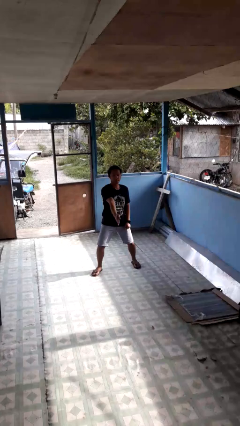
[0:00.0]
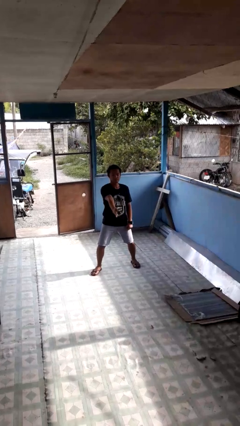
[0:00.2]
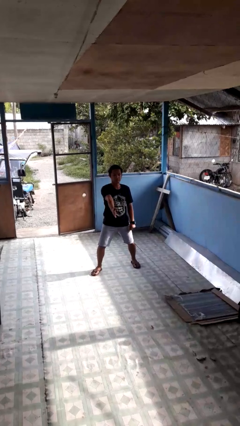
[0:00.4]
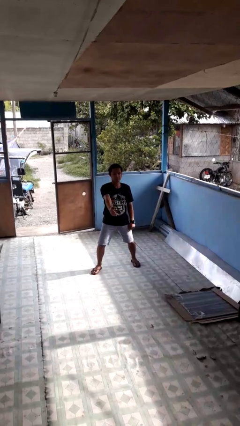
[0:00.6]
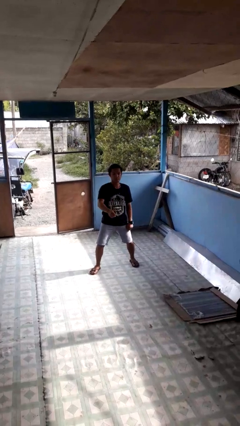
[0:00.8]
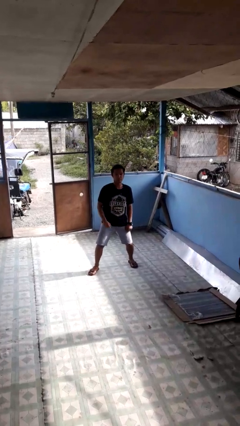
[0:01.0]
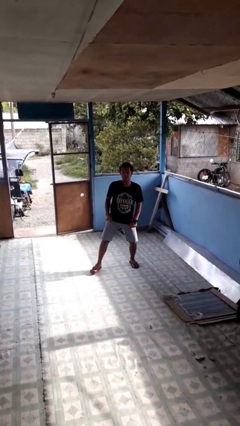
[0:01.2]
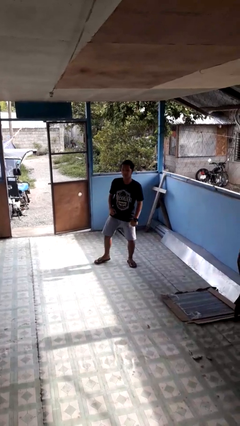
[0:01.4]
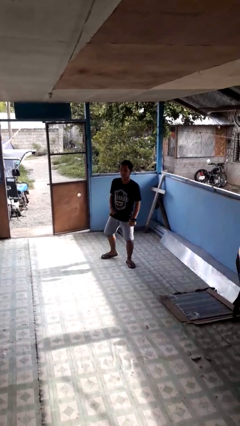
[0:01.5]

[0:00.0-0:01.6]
person karate chop

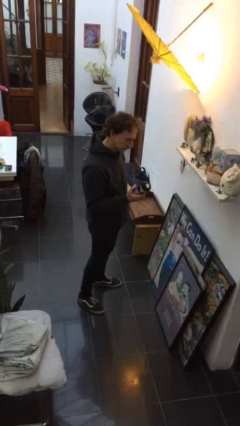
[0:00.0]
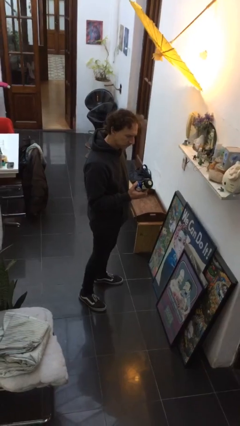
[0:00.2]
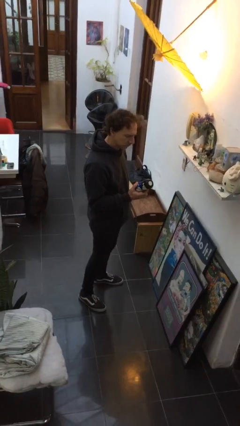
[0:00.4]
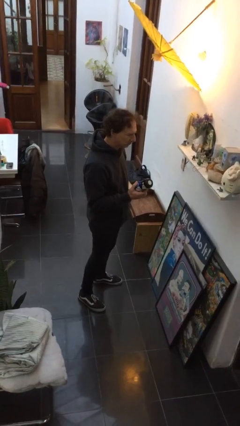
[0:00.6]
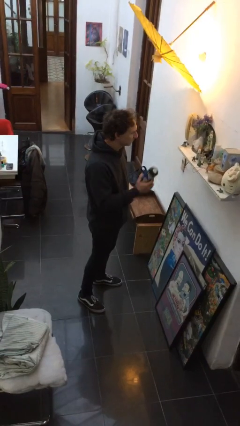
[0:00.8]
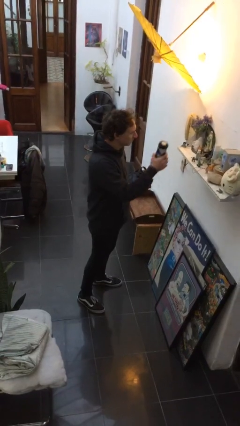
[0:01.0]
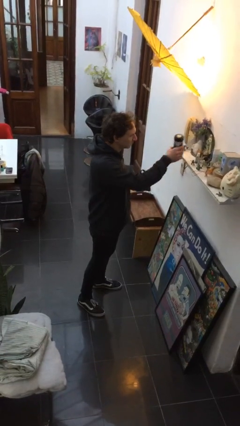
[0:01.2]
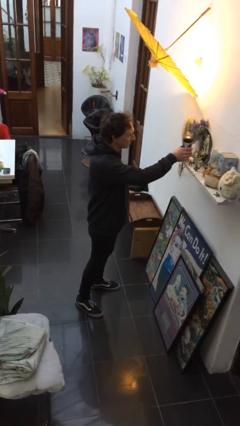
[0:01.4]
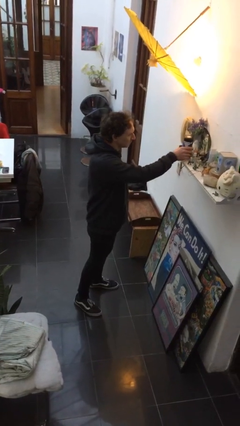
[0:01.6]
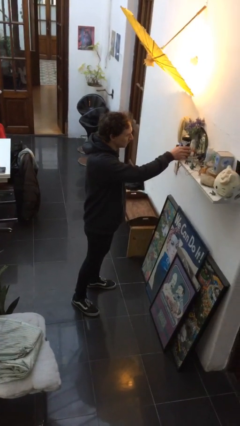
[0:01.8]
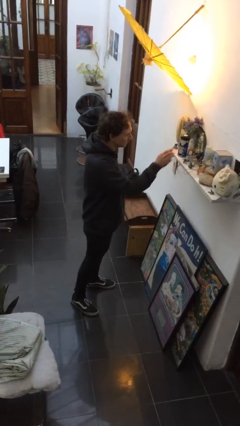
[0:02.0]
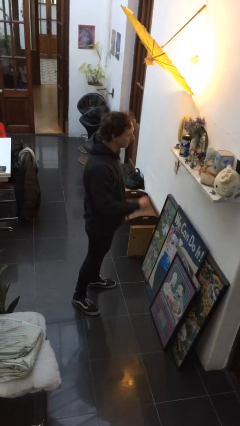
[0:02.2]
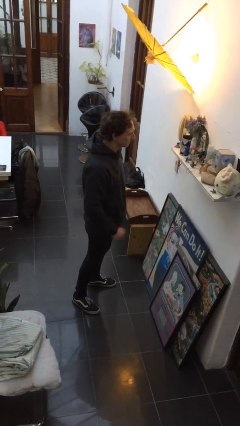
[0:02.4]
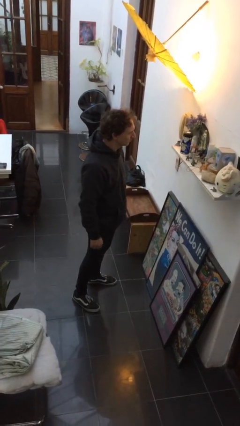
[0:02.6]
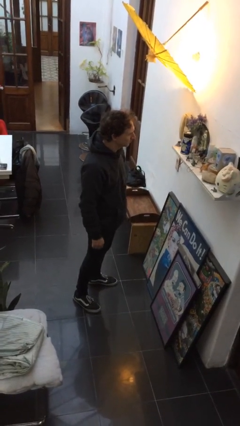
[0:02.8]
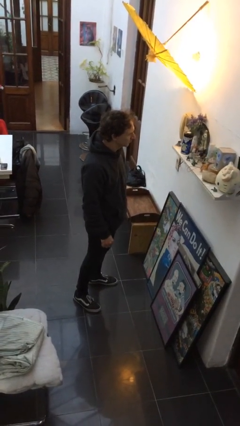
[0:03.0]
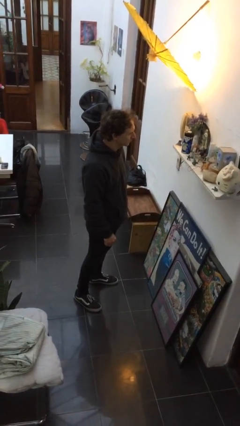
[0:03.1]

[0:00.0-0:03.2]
person puts down object on shelf

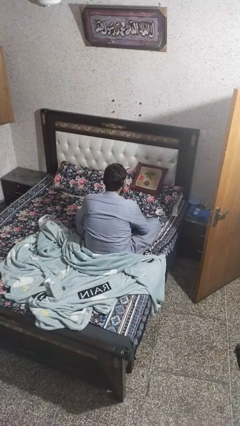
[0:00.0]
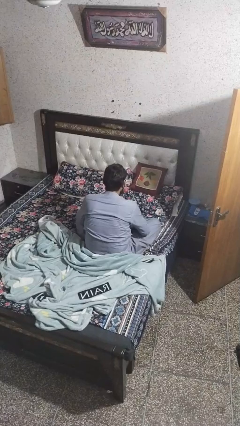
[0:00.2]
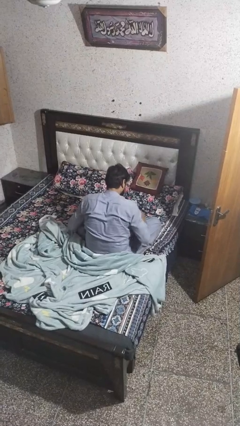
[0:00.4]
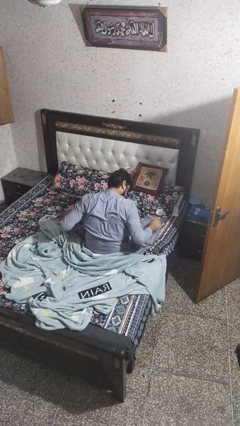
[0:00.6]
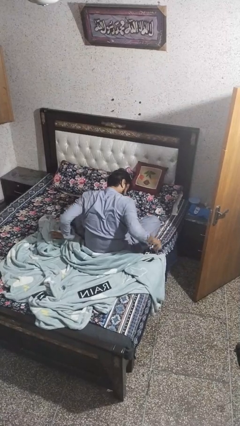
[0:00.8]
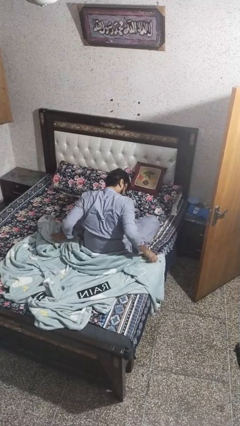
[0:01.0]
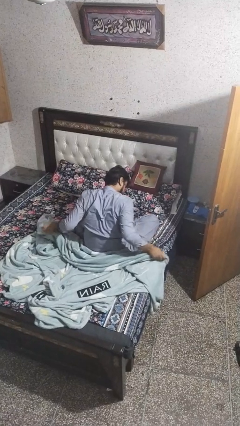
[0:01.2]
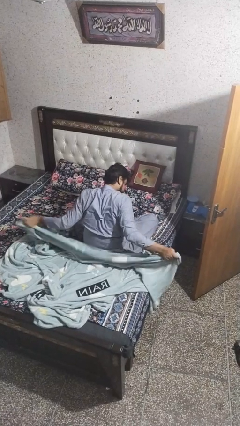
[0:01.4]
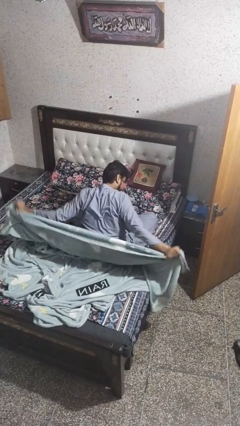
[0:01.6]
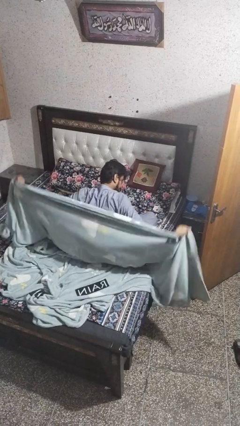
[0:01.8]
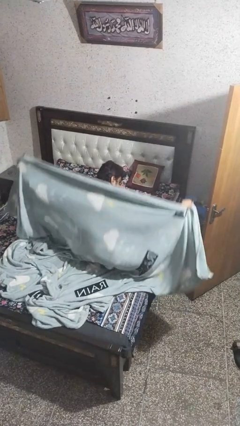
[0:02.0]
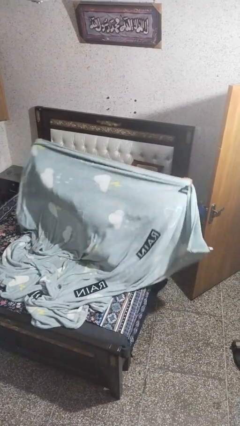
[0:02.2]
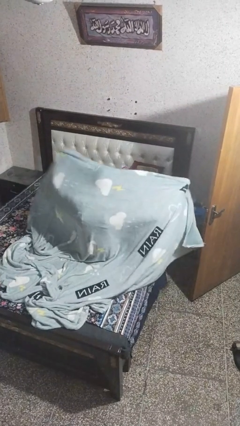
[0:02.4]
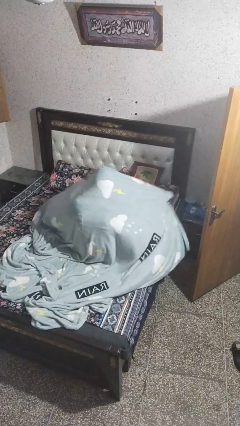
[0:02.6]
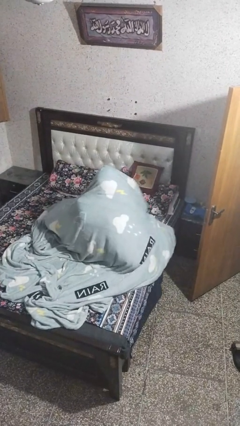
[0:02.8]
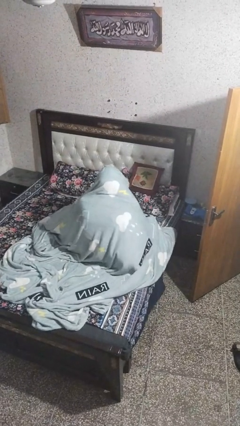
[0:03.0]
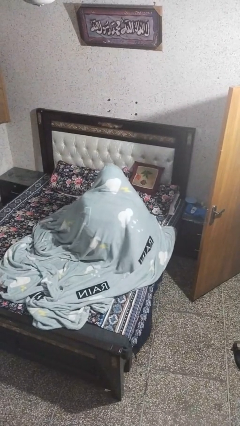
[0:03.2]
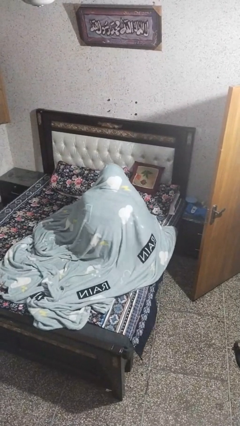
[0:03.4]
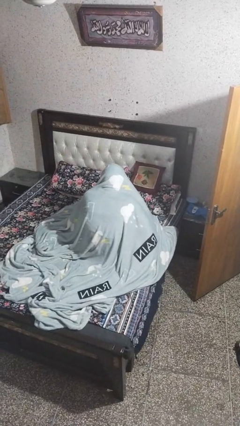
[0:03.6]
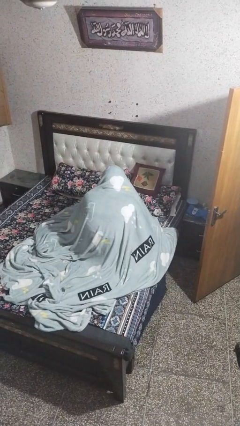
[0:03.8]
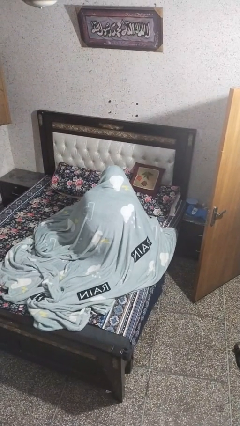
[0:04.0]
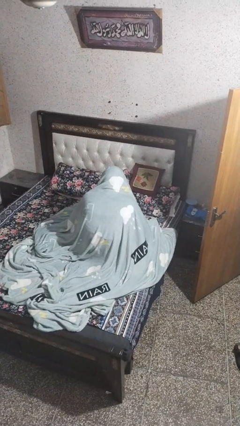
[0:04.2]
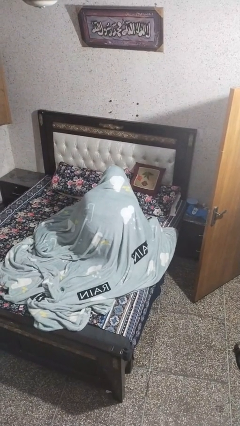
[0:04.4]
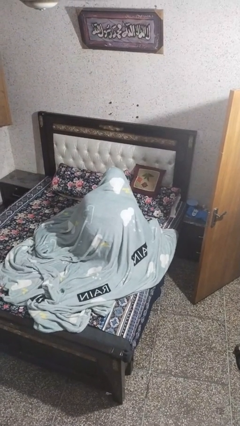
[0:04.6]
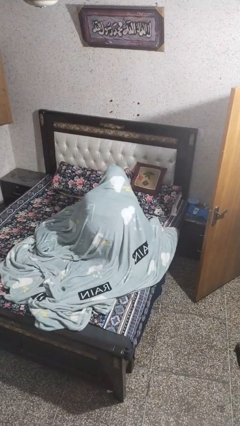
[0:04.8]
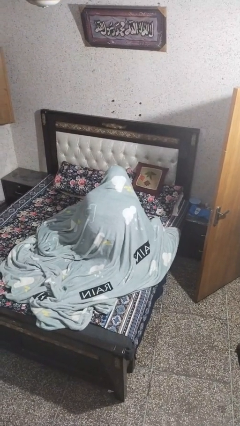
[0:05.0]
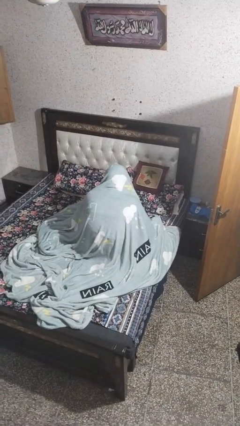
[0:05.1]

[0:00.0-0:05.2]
person covers with blanket

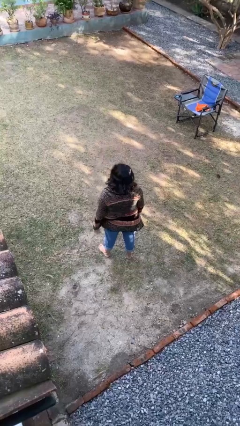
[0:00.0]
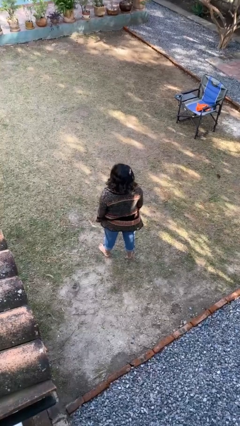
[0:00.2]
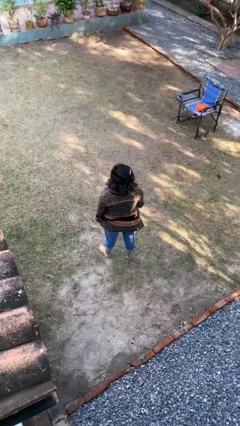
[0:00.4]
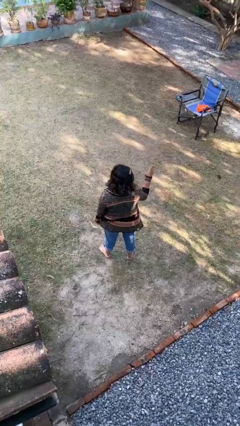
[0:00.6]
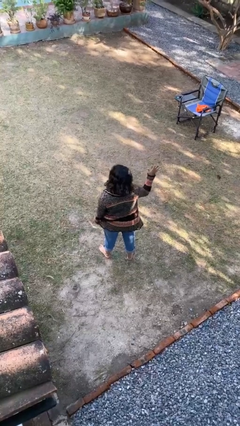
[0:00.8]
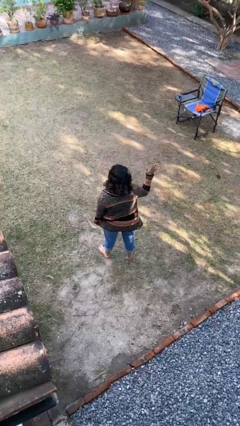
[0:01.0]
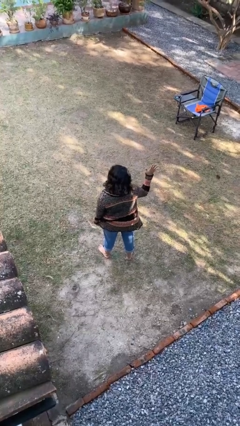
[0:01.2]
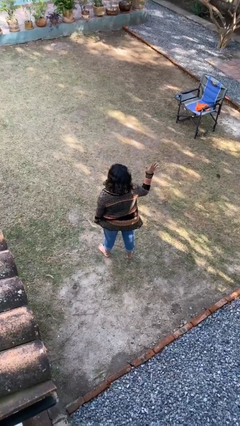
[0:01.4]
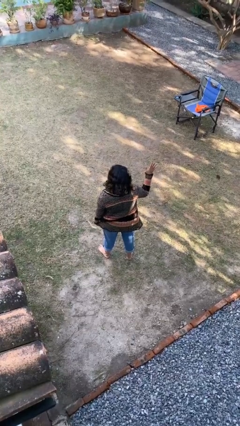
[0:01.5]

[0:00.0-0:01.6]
person gestures number five

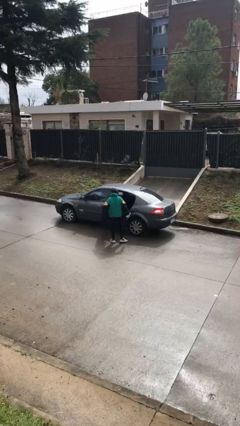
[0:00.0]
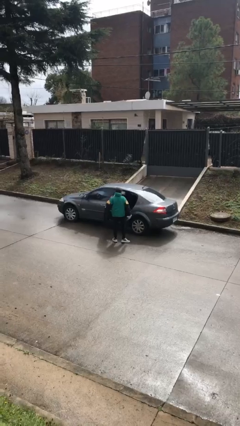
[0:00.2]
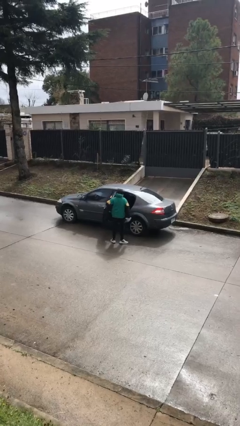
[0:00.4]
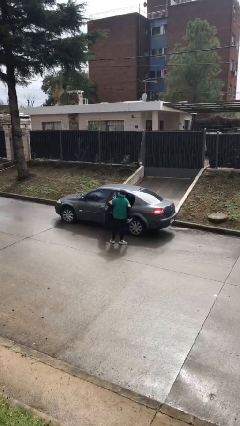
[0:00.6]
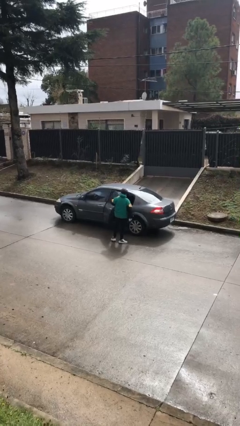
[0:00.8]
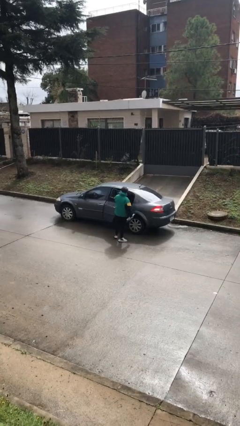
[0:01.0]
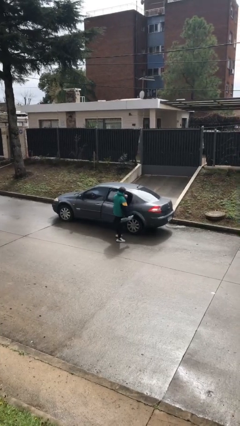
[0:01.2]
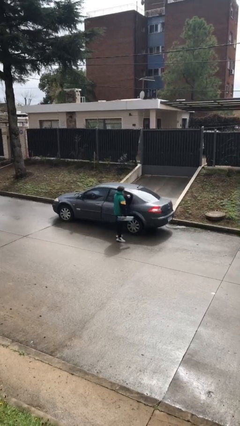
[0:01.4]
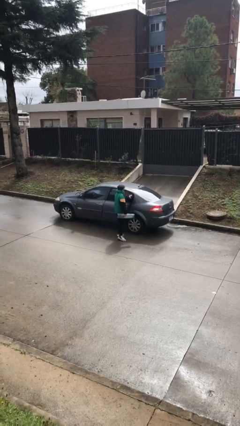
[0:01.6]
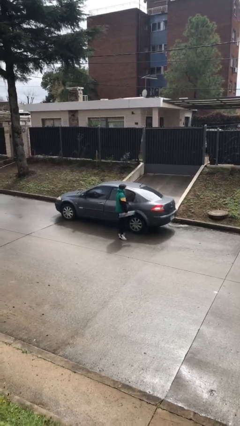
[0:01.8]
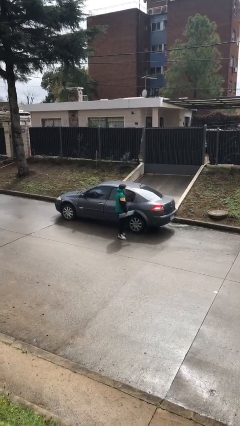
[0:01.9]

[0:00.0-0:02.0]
person closes car door

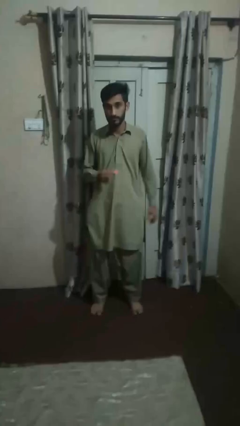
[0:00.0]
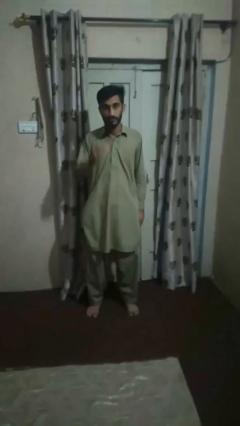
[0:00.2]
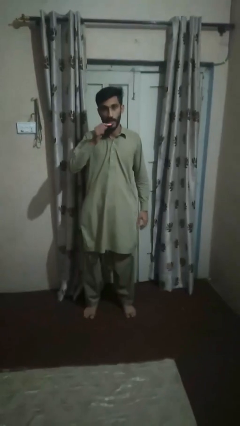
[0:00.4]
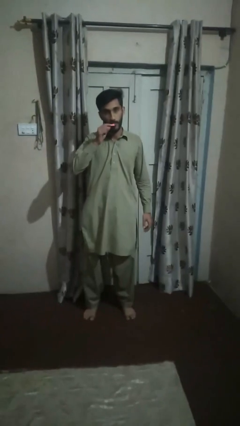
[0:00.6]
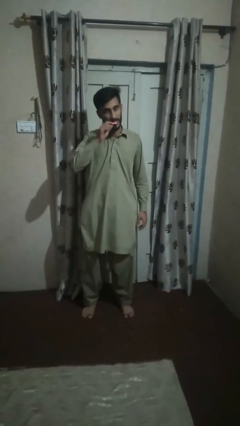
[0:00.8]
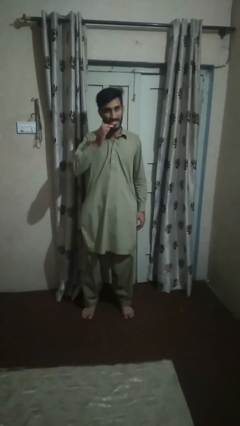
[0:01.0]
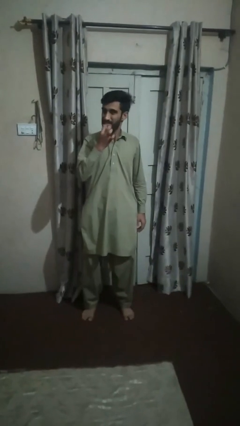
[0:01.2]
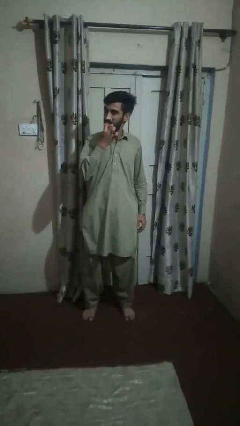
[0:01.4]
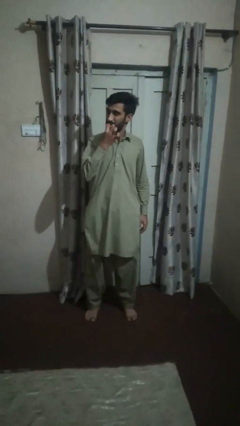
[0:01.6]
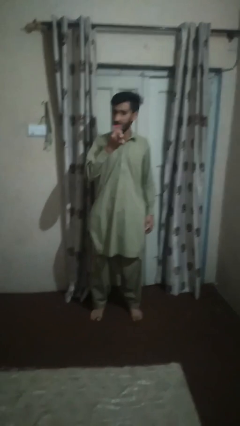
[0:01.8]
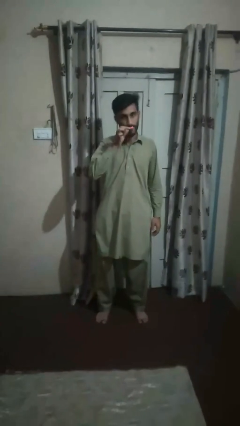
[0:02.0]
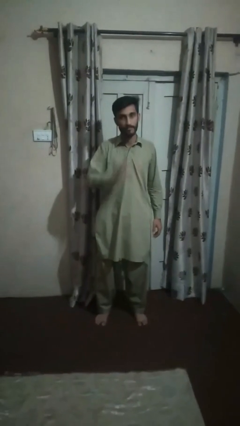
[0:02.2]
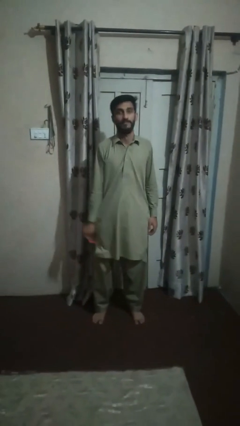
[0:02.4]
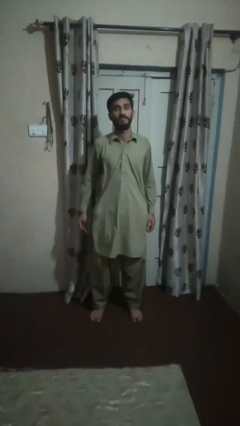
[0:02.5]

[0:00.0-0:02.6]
person brushes teeth

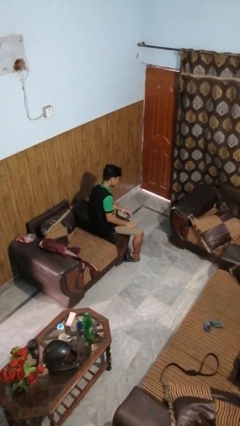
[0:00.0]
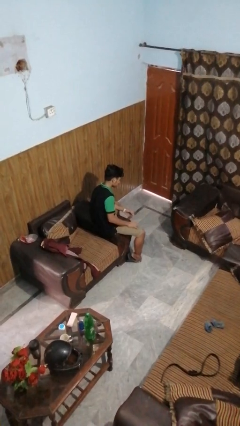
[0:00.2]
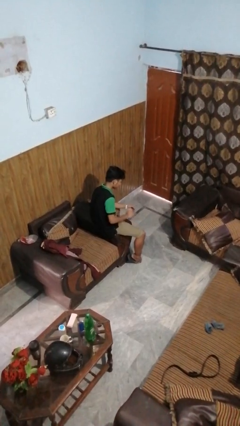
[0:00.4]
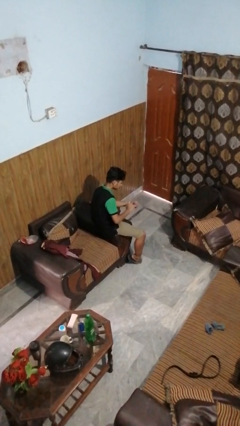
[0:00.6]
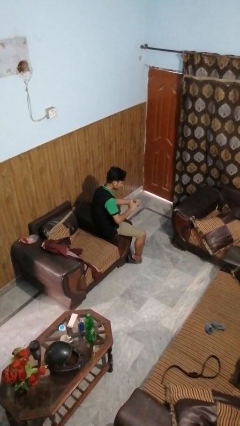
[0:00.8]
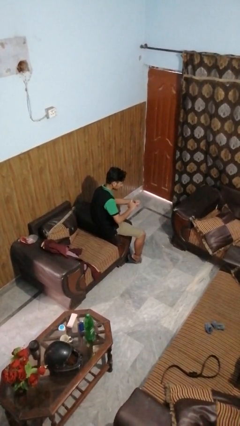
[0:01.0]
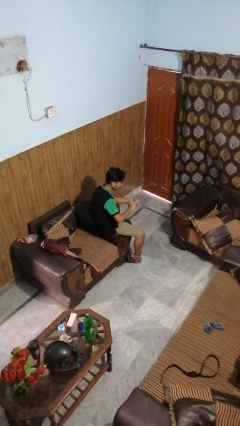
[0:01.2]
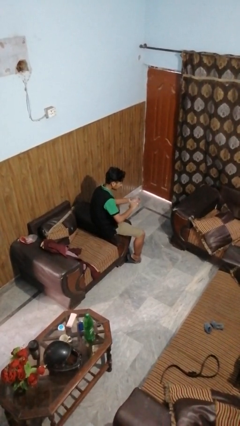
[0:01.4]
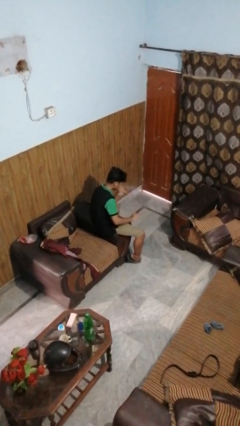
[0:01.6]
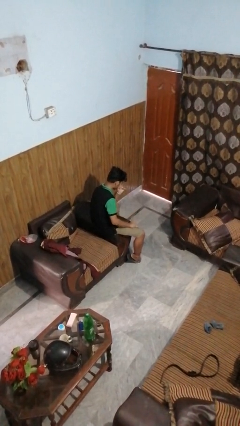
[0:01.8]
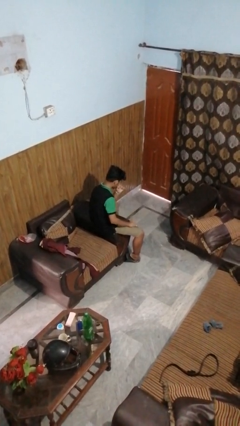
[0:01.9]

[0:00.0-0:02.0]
person puts on ring
